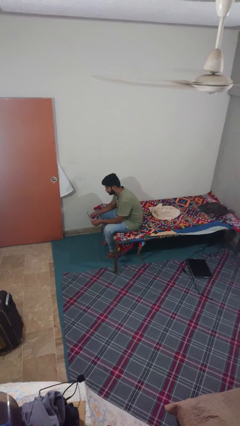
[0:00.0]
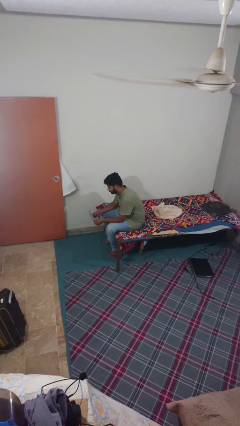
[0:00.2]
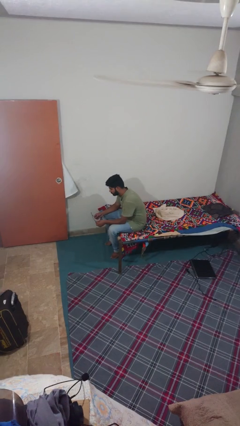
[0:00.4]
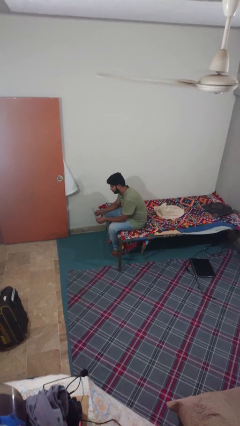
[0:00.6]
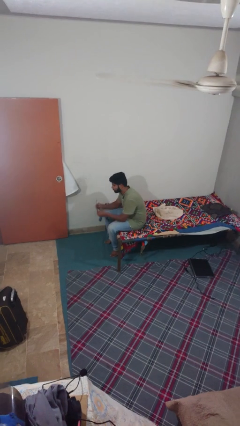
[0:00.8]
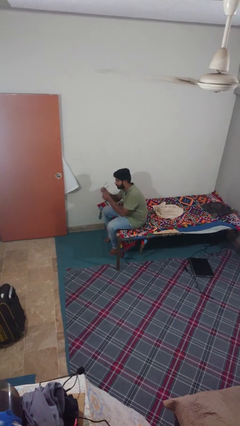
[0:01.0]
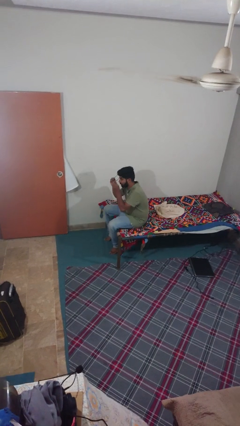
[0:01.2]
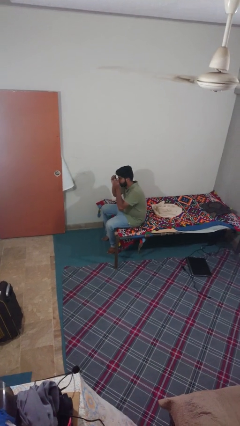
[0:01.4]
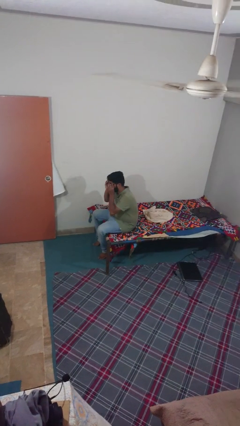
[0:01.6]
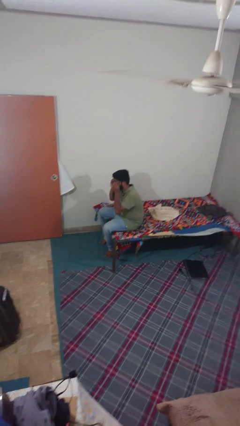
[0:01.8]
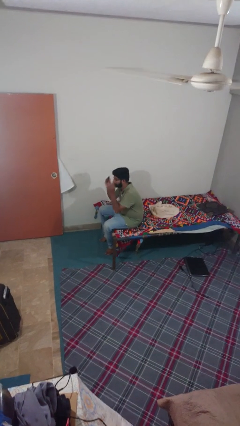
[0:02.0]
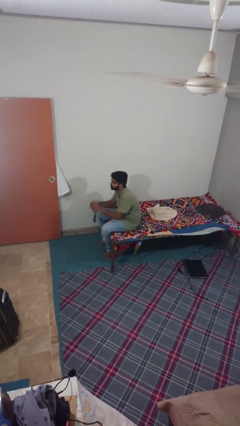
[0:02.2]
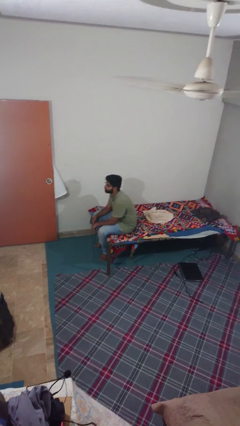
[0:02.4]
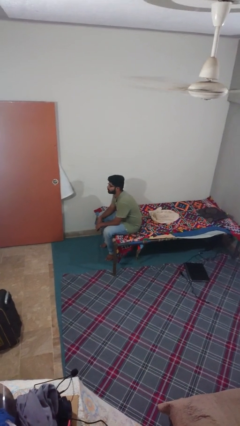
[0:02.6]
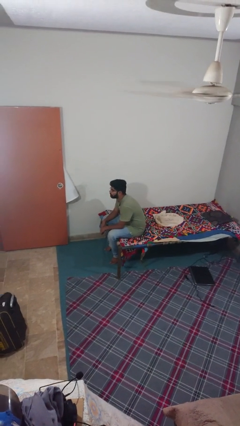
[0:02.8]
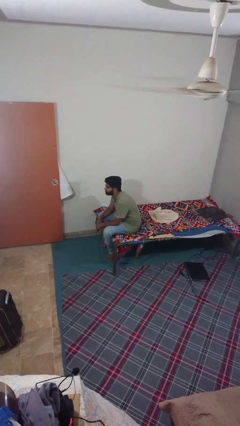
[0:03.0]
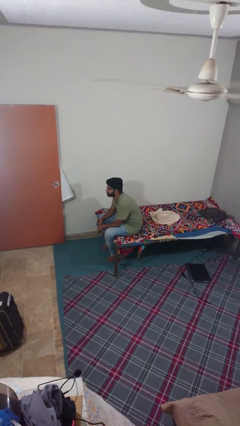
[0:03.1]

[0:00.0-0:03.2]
person puts on glasses

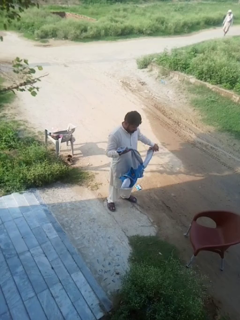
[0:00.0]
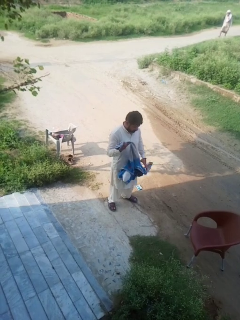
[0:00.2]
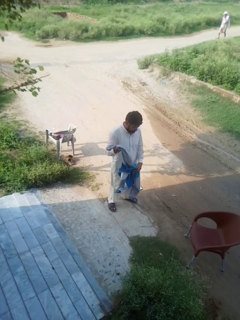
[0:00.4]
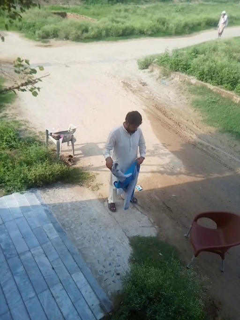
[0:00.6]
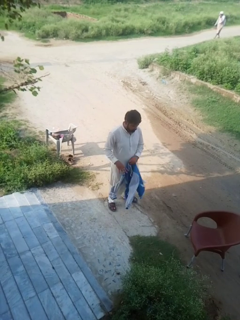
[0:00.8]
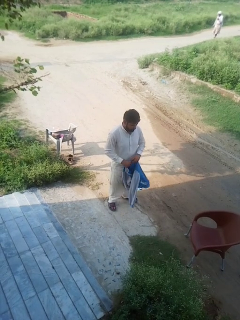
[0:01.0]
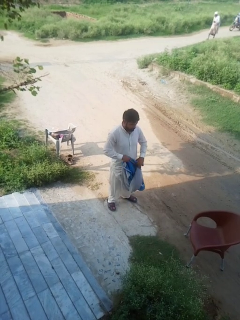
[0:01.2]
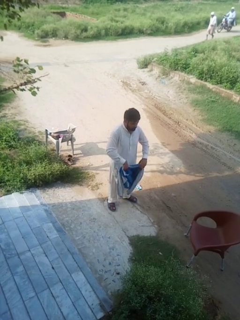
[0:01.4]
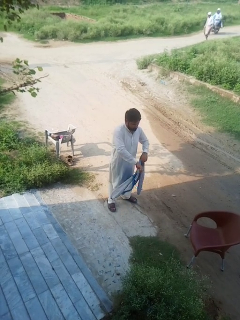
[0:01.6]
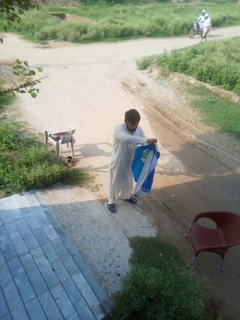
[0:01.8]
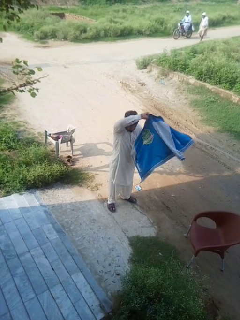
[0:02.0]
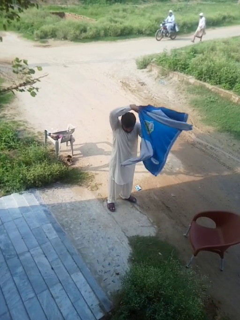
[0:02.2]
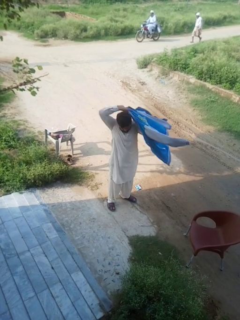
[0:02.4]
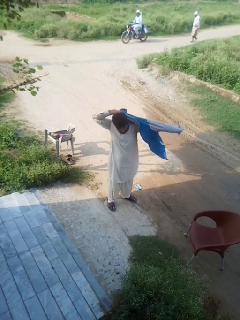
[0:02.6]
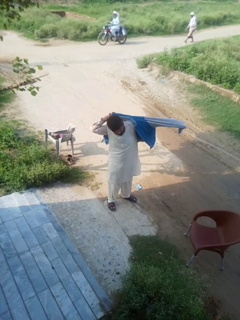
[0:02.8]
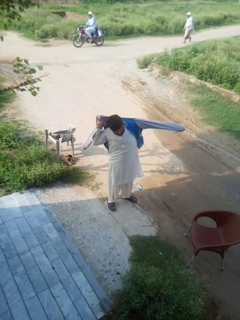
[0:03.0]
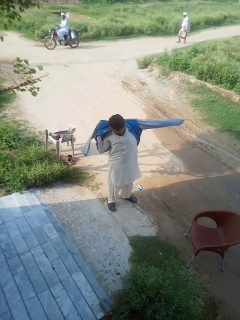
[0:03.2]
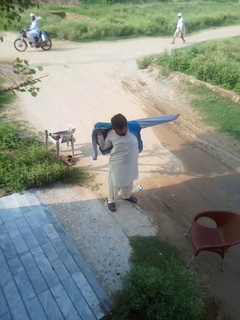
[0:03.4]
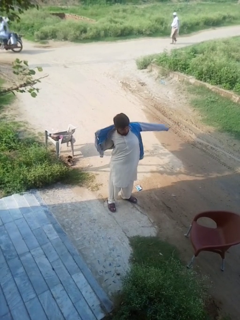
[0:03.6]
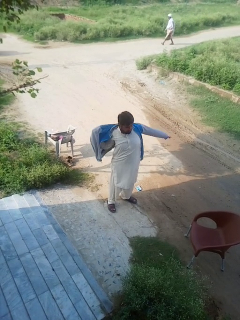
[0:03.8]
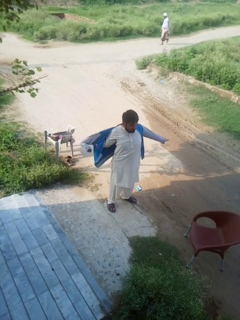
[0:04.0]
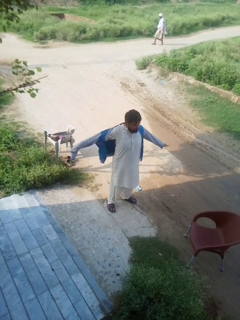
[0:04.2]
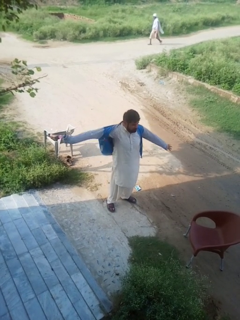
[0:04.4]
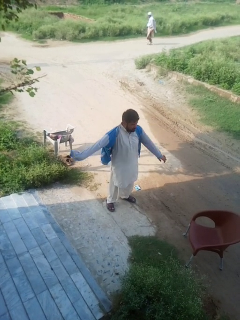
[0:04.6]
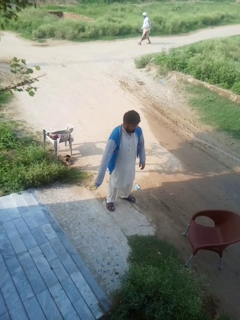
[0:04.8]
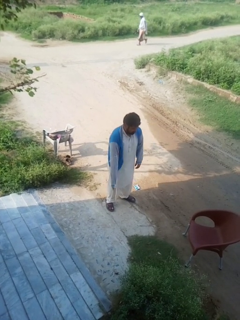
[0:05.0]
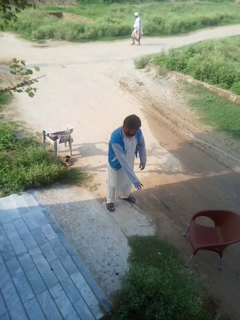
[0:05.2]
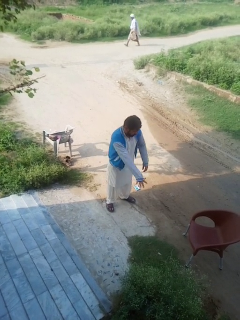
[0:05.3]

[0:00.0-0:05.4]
person puts on jacket

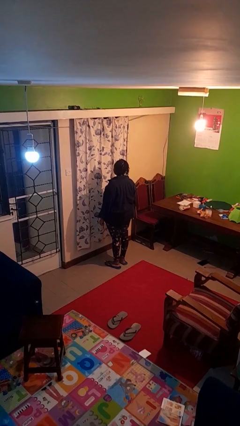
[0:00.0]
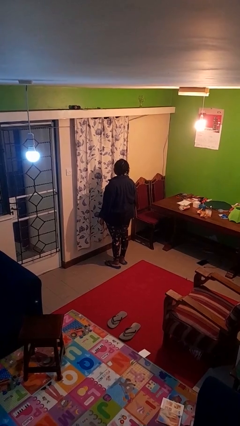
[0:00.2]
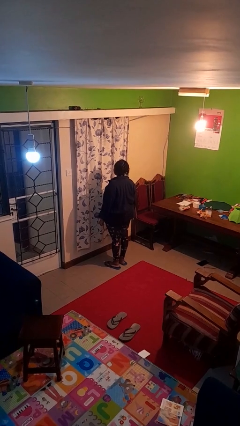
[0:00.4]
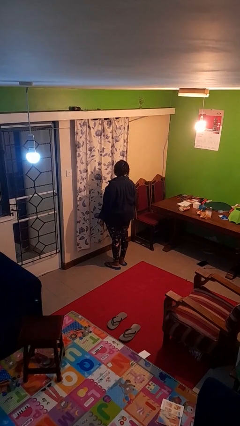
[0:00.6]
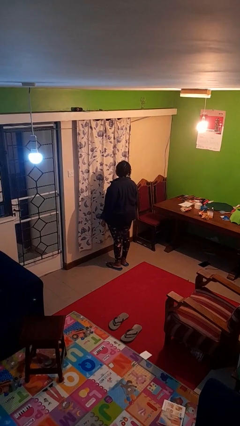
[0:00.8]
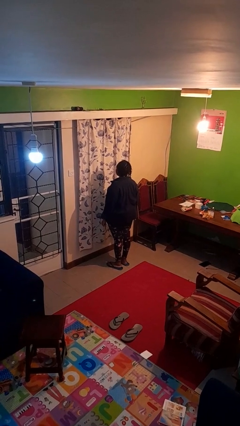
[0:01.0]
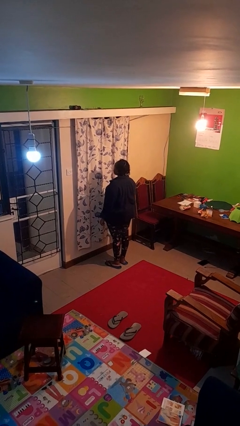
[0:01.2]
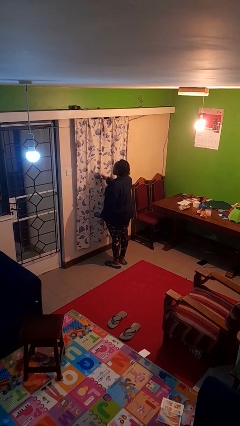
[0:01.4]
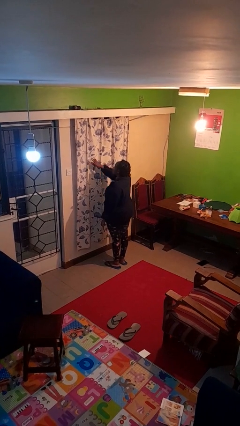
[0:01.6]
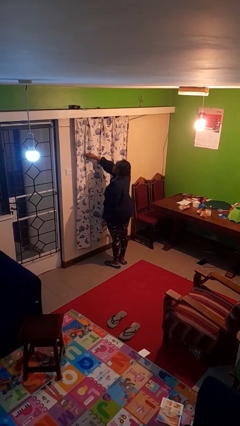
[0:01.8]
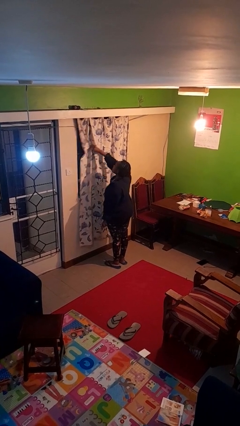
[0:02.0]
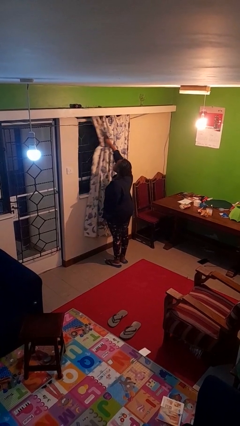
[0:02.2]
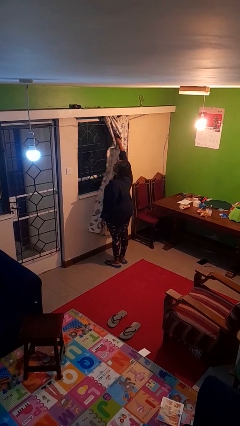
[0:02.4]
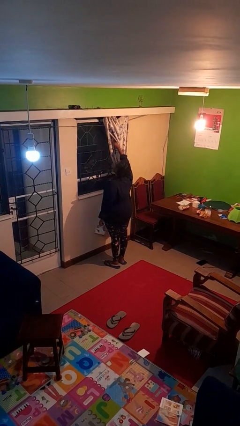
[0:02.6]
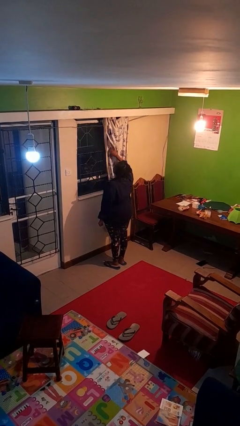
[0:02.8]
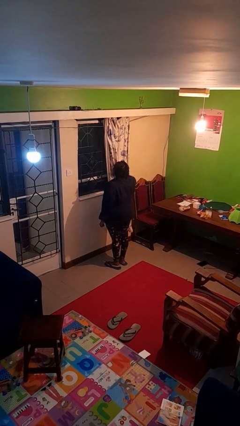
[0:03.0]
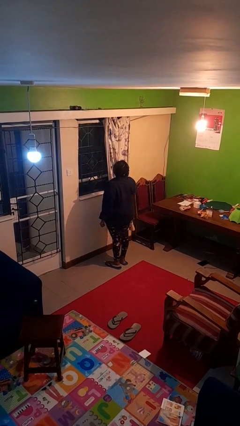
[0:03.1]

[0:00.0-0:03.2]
person opens curtains

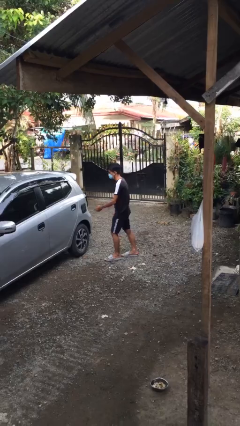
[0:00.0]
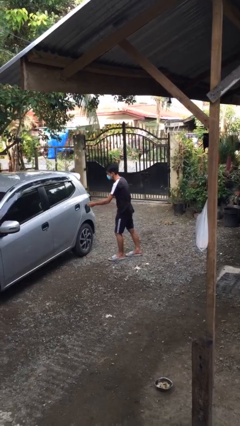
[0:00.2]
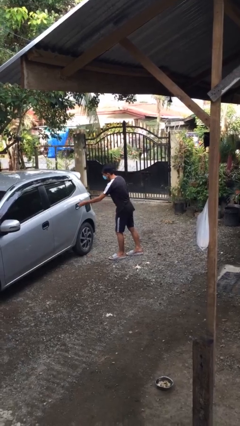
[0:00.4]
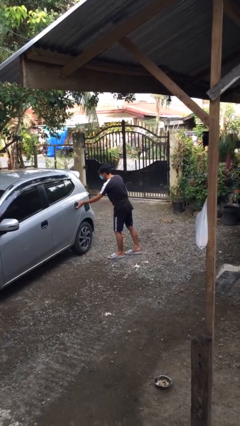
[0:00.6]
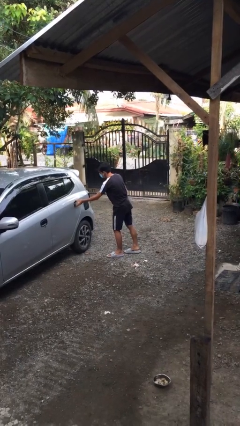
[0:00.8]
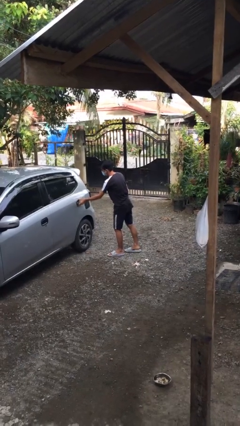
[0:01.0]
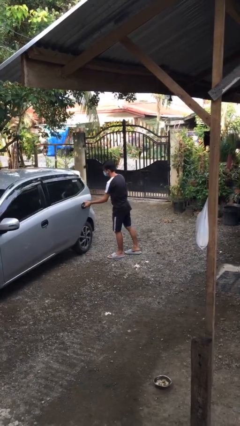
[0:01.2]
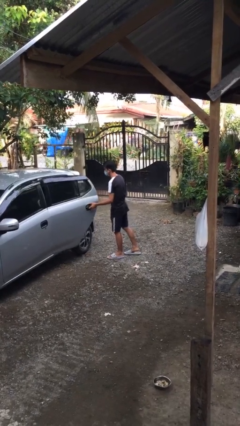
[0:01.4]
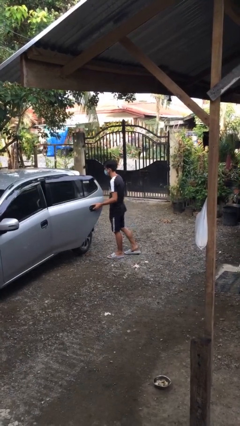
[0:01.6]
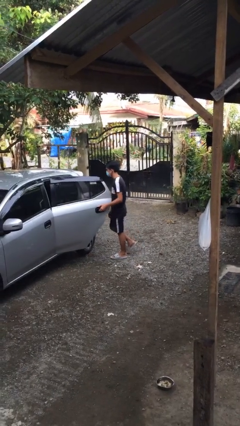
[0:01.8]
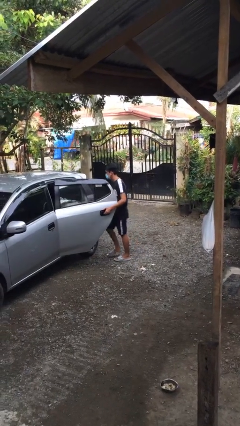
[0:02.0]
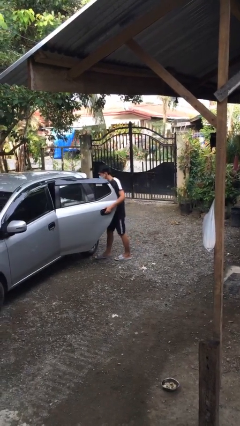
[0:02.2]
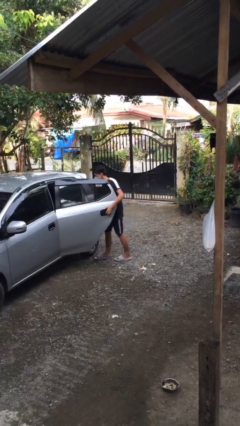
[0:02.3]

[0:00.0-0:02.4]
person opens car door

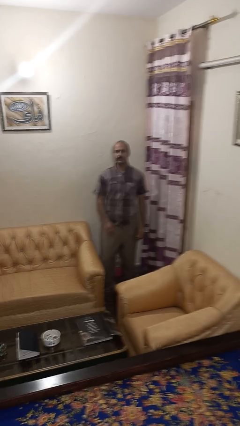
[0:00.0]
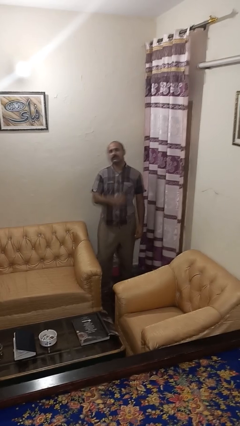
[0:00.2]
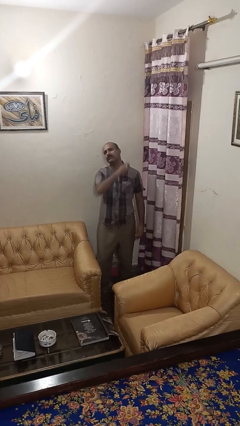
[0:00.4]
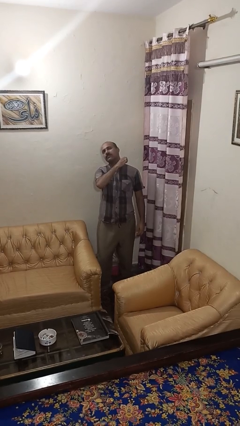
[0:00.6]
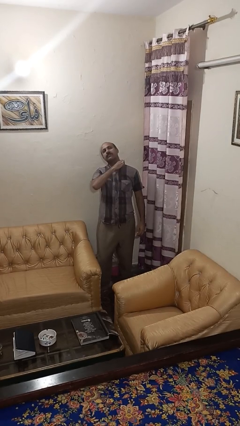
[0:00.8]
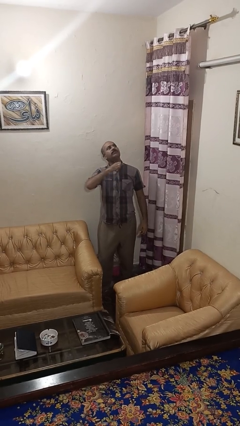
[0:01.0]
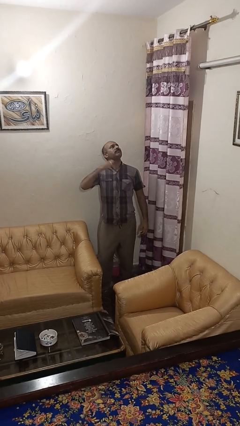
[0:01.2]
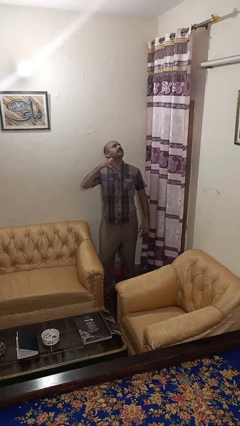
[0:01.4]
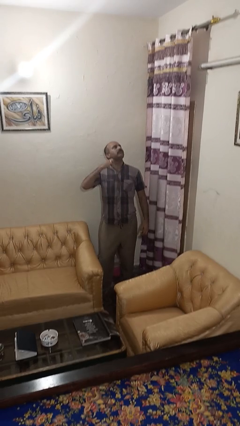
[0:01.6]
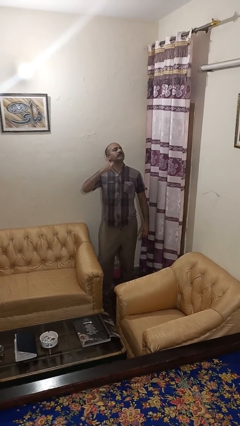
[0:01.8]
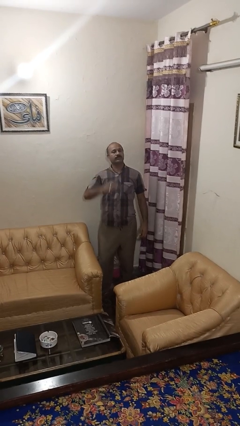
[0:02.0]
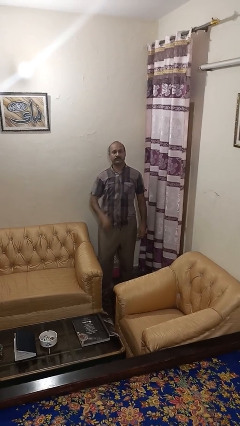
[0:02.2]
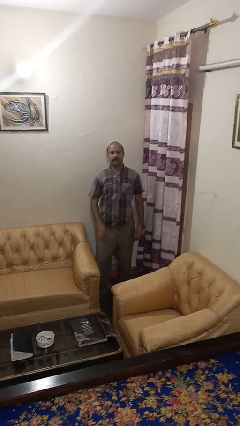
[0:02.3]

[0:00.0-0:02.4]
person gestures cut

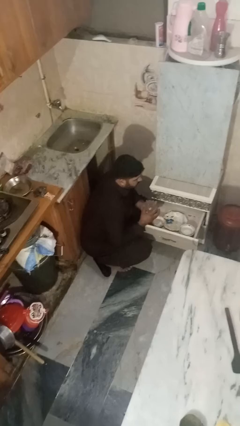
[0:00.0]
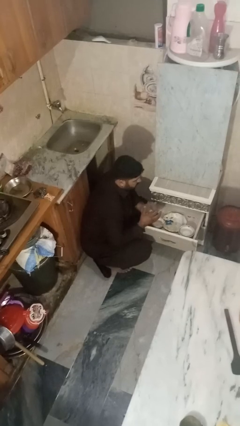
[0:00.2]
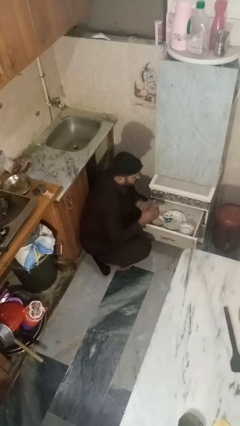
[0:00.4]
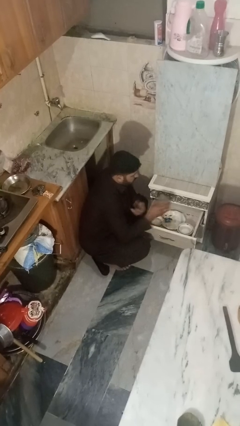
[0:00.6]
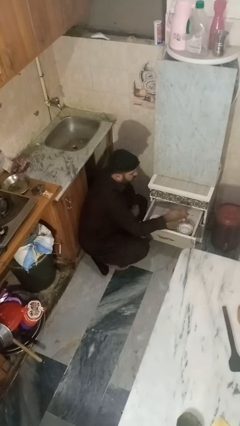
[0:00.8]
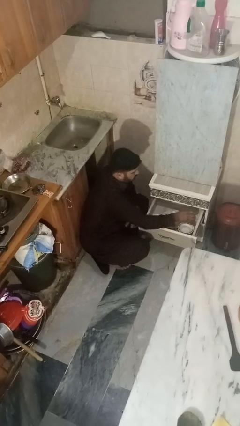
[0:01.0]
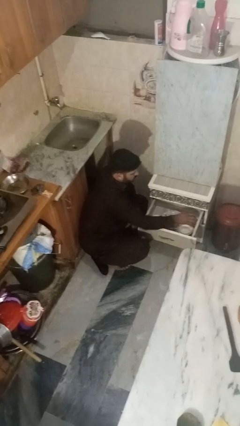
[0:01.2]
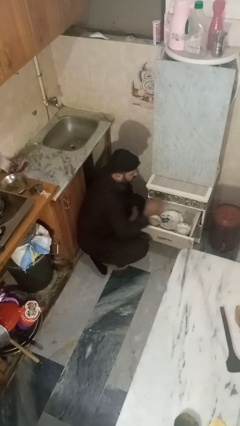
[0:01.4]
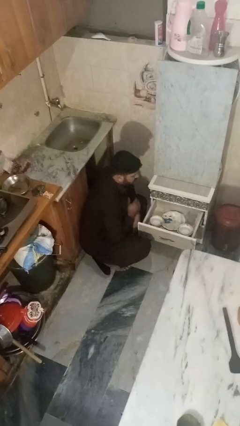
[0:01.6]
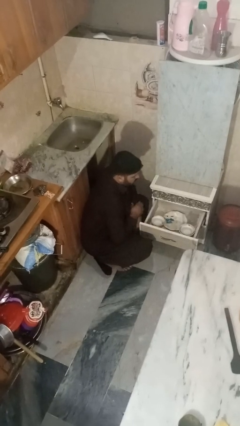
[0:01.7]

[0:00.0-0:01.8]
person puts object into kitchen drawer
